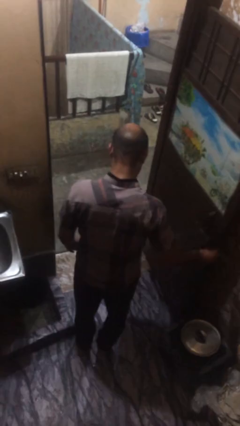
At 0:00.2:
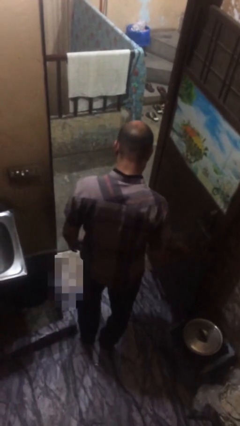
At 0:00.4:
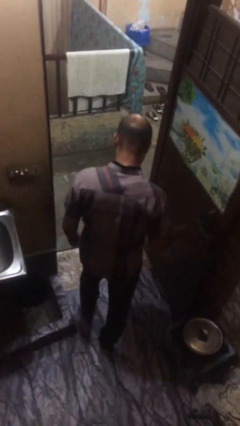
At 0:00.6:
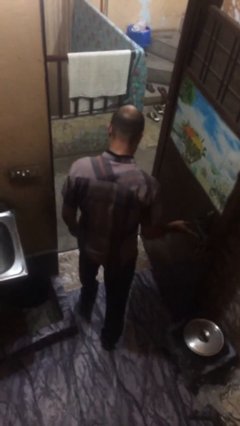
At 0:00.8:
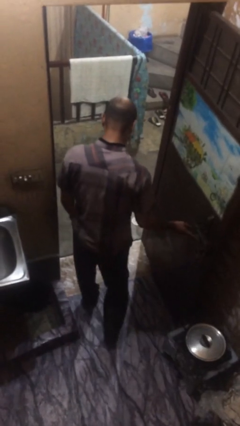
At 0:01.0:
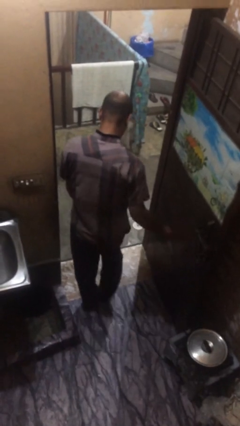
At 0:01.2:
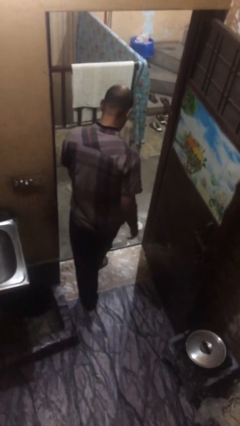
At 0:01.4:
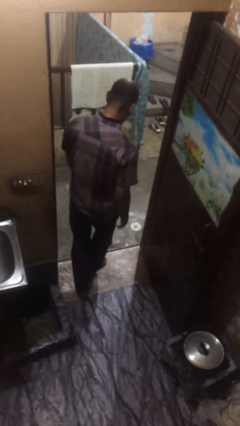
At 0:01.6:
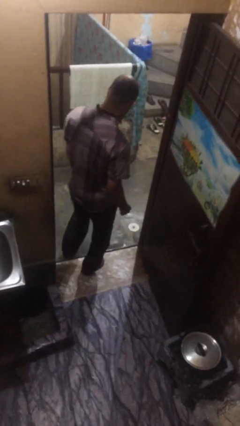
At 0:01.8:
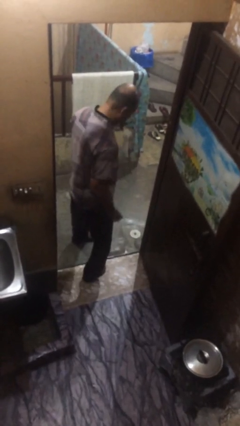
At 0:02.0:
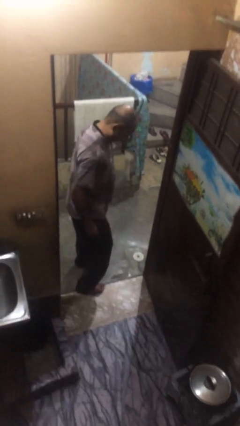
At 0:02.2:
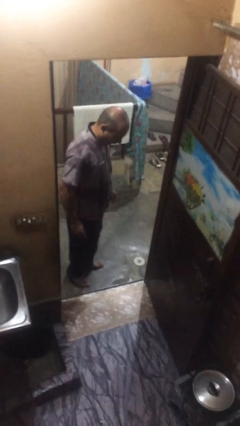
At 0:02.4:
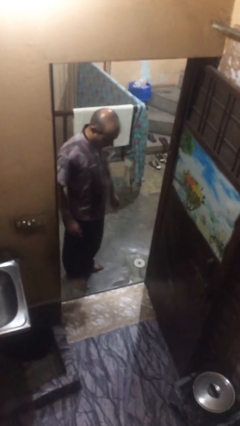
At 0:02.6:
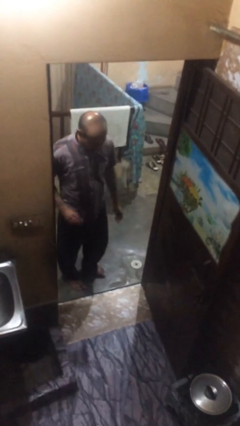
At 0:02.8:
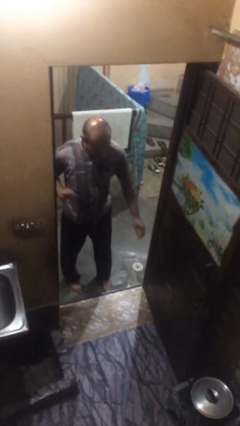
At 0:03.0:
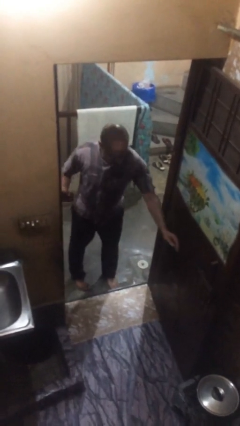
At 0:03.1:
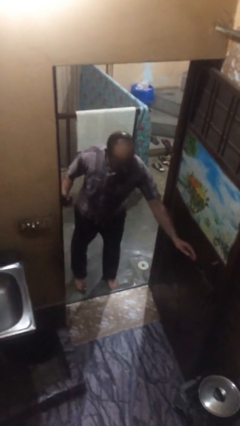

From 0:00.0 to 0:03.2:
person exits scene through structure

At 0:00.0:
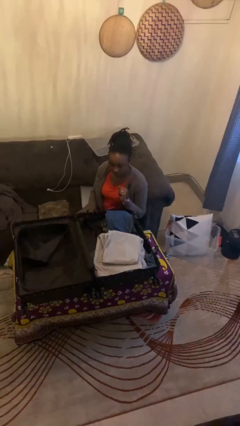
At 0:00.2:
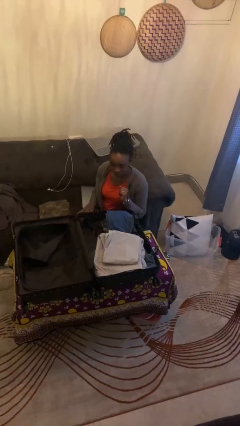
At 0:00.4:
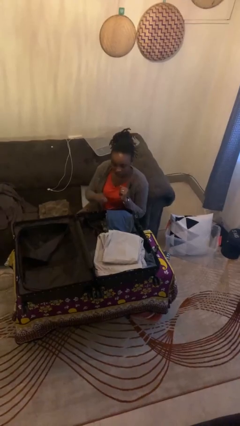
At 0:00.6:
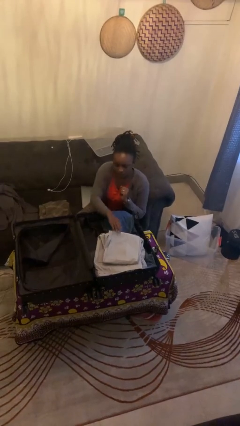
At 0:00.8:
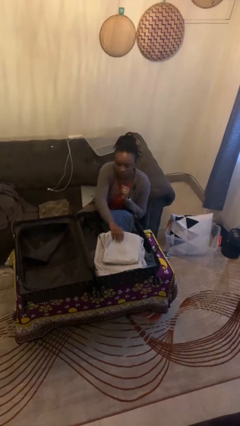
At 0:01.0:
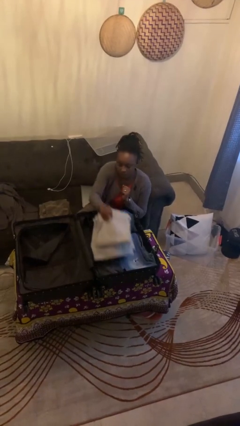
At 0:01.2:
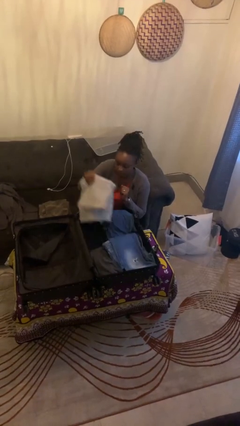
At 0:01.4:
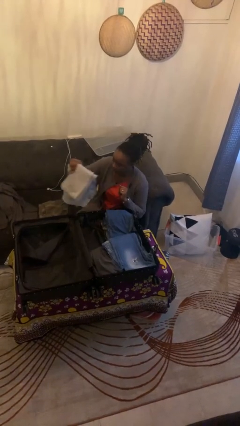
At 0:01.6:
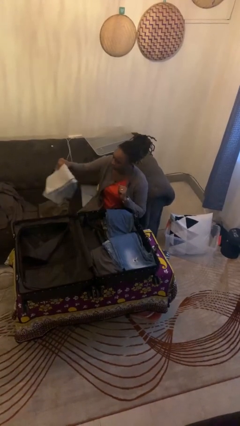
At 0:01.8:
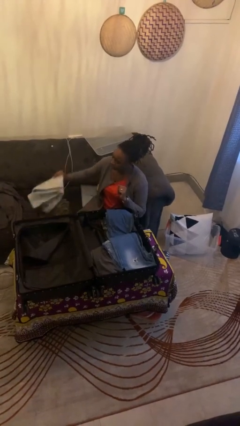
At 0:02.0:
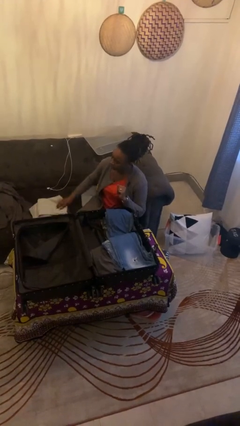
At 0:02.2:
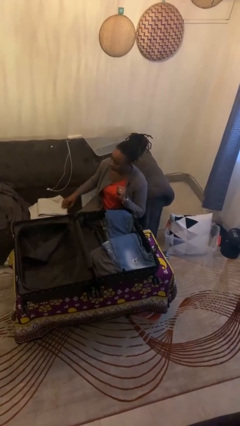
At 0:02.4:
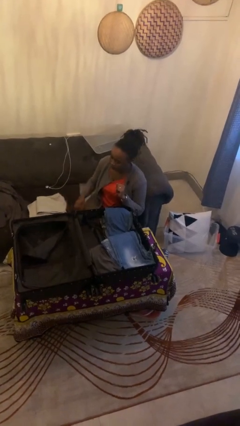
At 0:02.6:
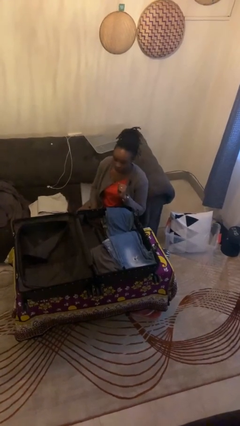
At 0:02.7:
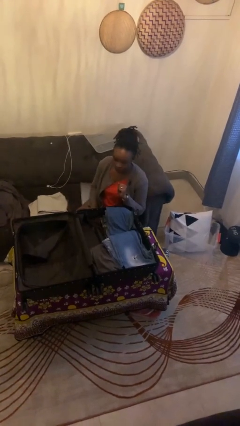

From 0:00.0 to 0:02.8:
person unloads clothes from suitcase

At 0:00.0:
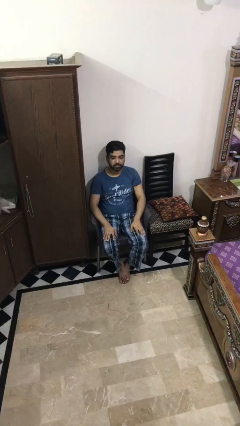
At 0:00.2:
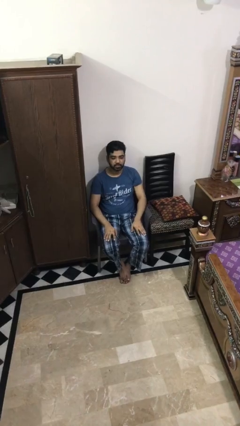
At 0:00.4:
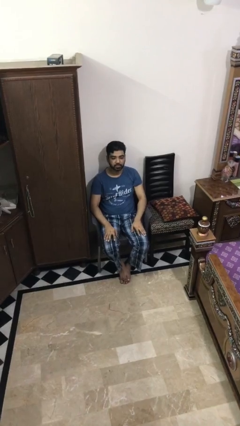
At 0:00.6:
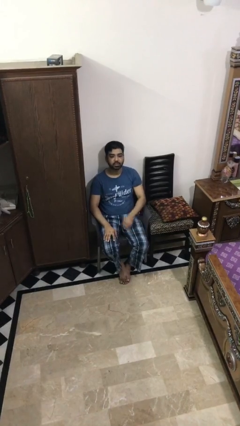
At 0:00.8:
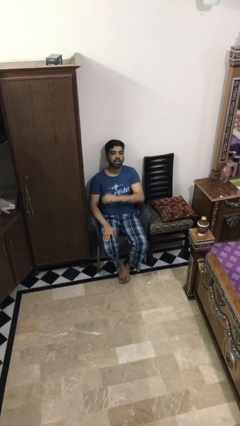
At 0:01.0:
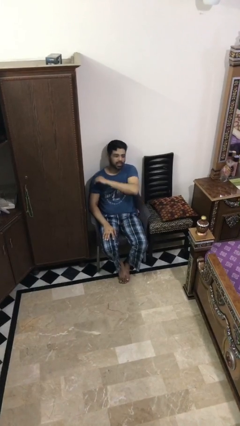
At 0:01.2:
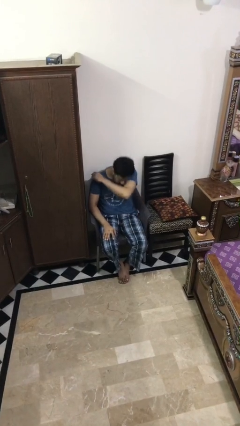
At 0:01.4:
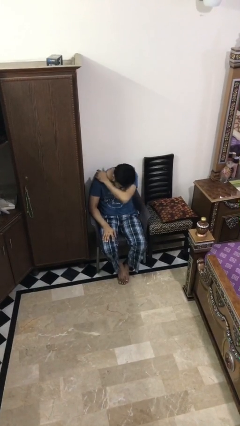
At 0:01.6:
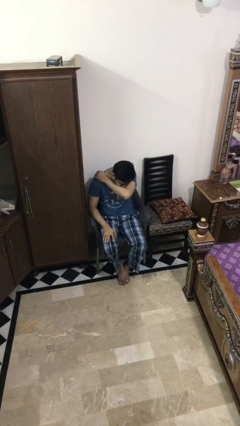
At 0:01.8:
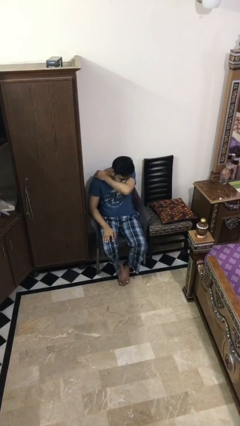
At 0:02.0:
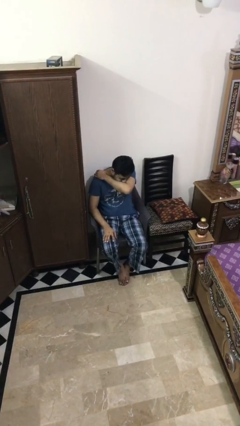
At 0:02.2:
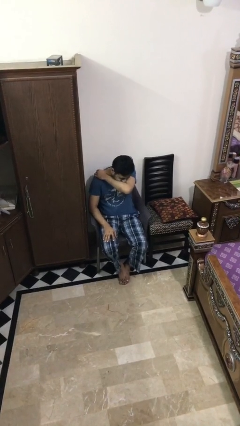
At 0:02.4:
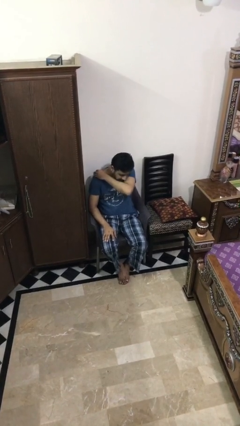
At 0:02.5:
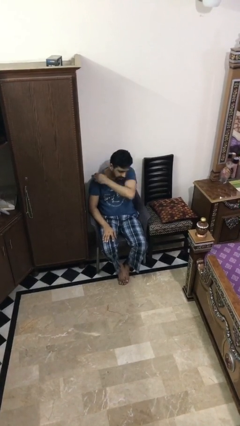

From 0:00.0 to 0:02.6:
person sneezes into arm

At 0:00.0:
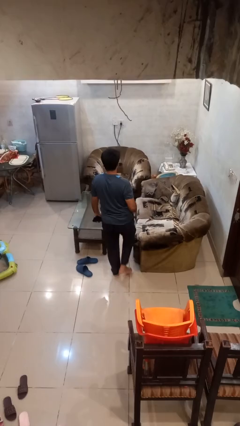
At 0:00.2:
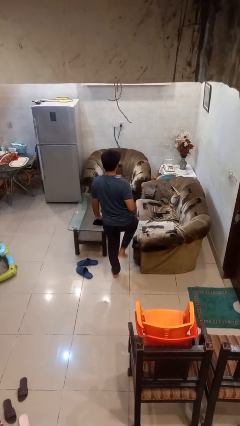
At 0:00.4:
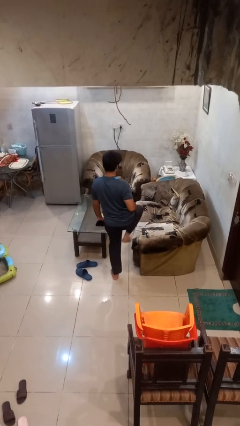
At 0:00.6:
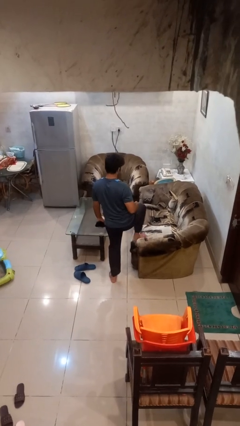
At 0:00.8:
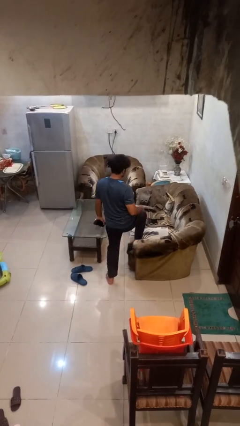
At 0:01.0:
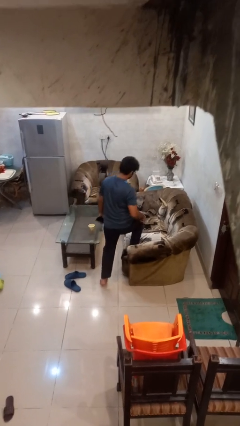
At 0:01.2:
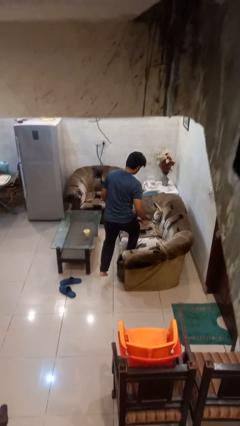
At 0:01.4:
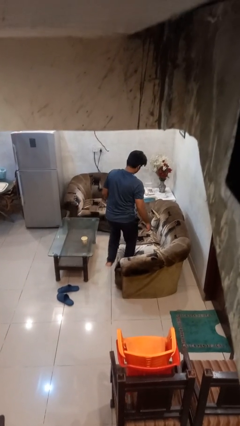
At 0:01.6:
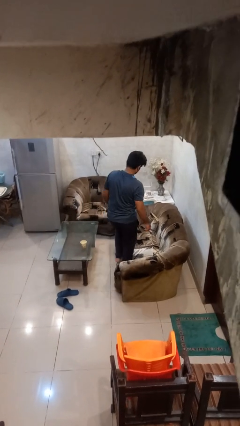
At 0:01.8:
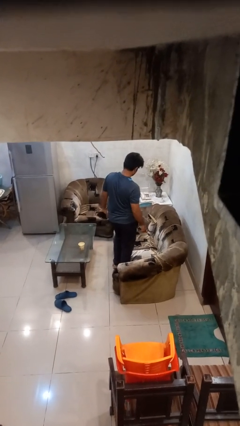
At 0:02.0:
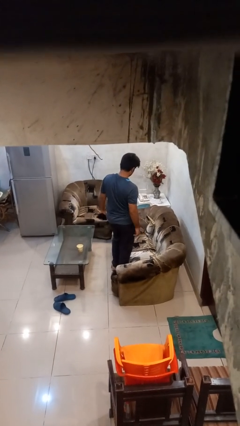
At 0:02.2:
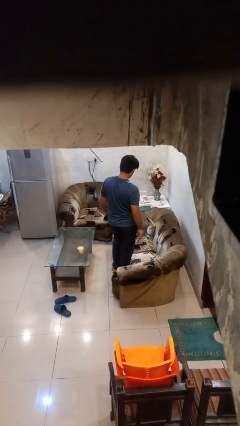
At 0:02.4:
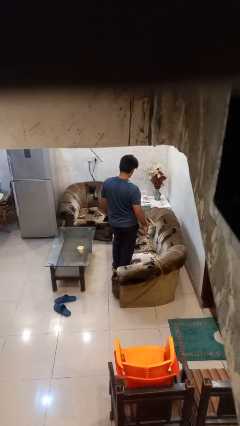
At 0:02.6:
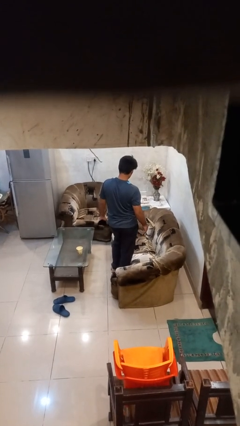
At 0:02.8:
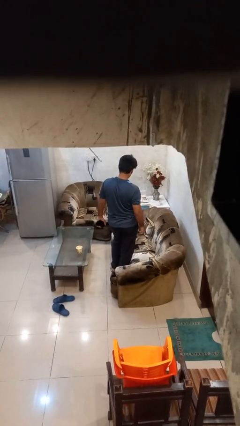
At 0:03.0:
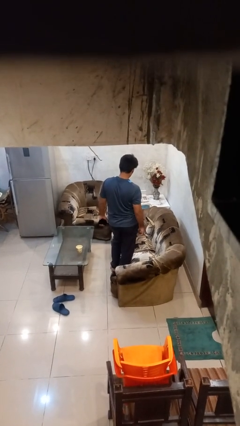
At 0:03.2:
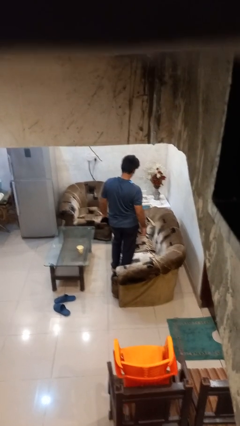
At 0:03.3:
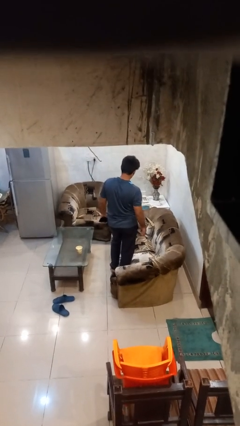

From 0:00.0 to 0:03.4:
person climbs on couch

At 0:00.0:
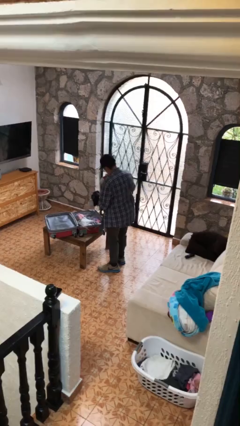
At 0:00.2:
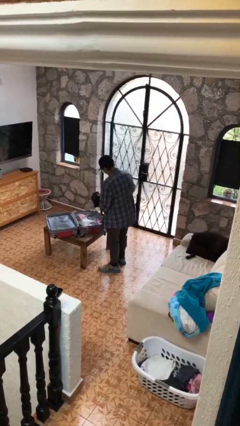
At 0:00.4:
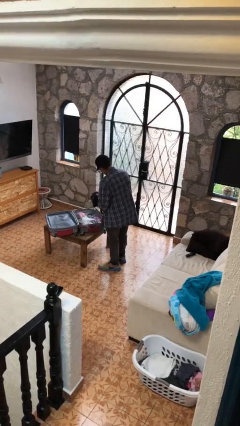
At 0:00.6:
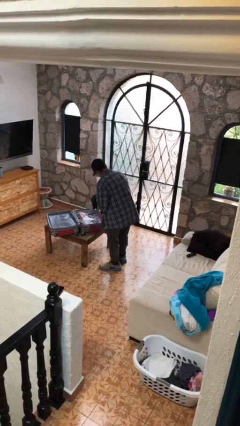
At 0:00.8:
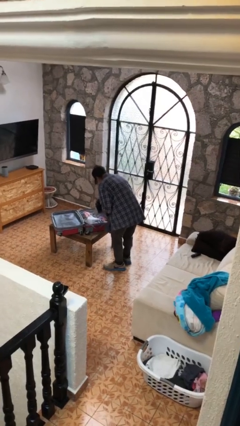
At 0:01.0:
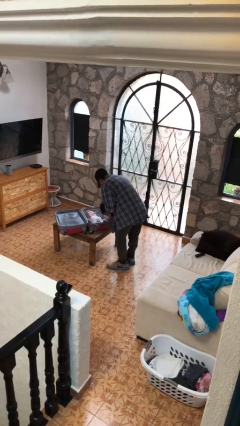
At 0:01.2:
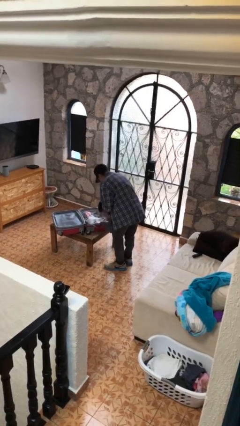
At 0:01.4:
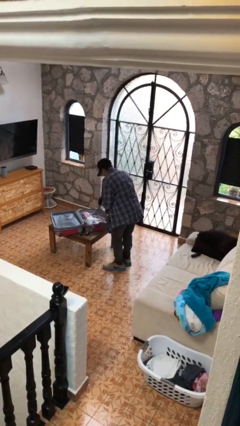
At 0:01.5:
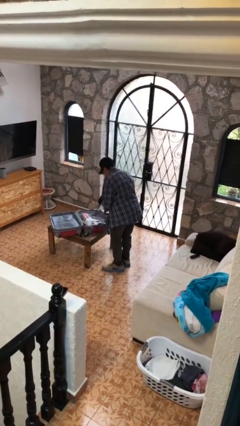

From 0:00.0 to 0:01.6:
person loads clothes into suitcase

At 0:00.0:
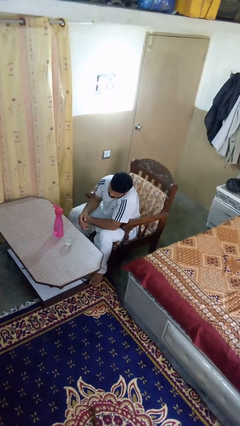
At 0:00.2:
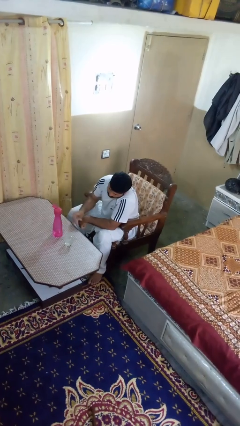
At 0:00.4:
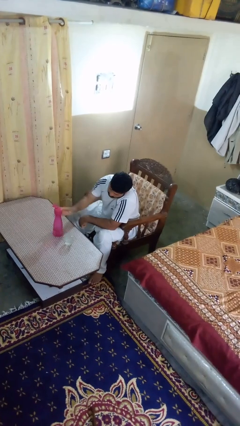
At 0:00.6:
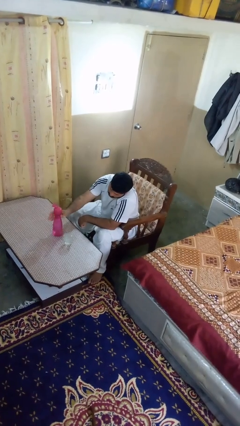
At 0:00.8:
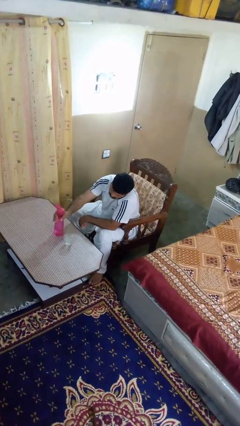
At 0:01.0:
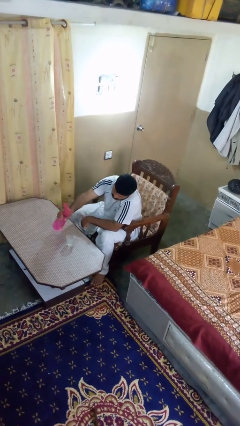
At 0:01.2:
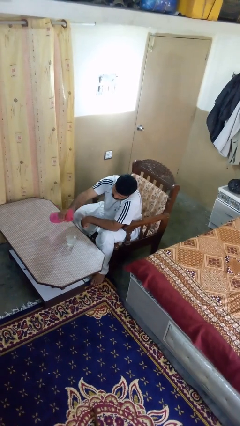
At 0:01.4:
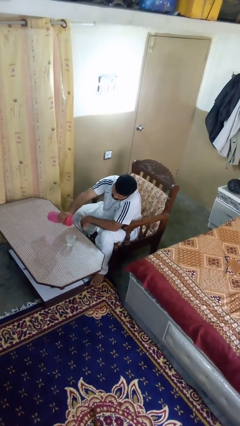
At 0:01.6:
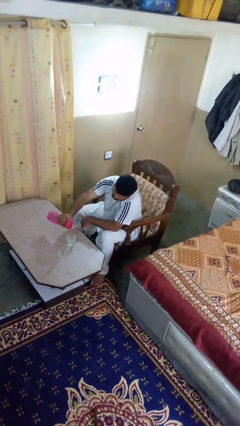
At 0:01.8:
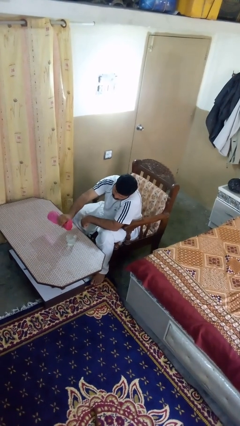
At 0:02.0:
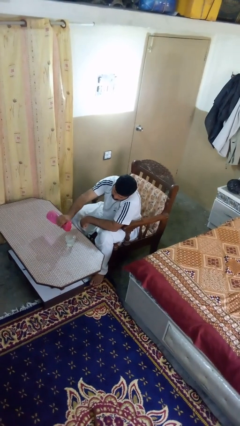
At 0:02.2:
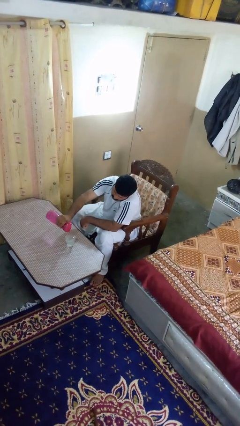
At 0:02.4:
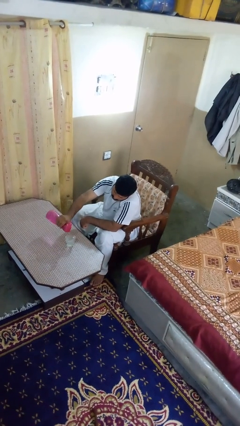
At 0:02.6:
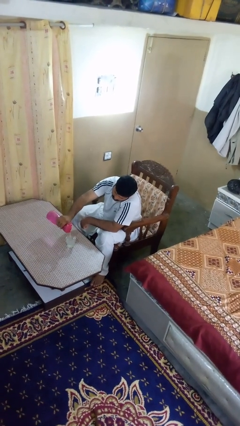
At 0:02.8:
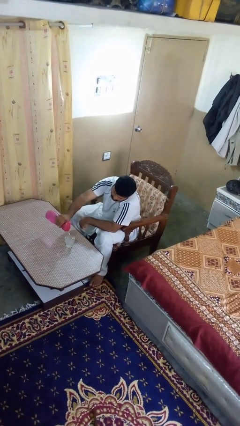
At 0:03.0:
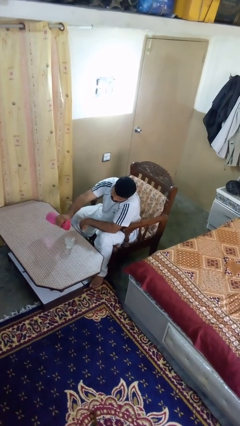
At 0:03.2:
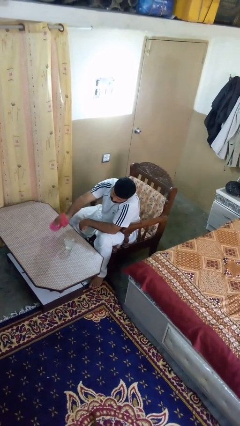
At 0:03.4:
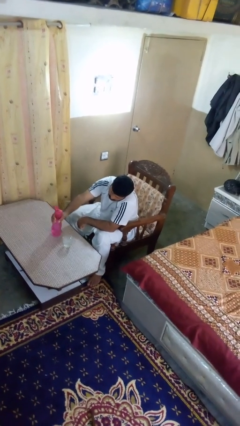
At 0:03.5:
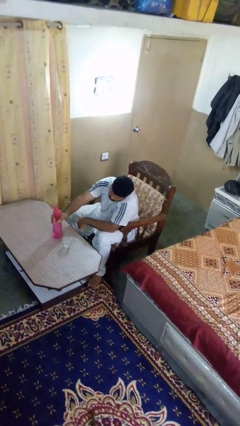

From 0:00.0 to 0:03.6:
person pours liquid into cup
